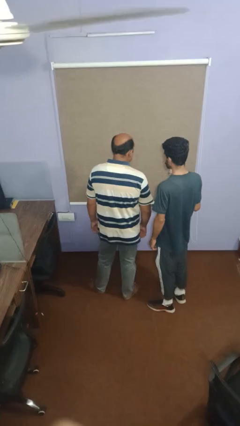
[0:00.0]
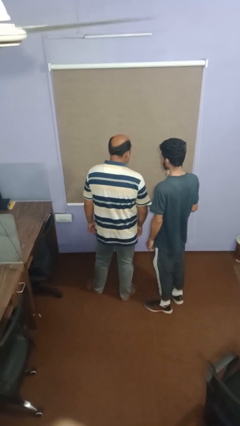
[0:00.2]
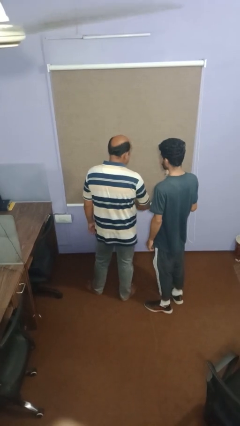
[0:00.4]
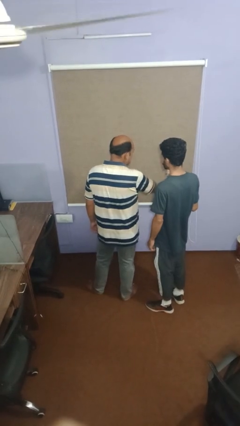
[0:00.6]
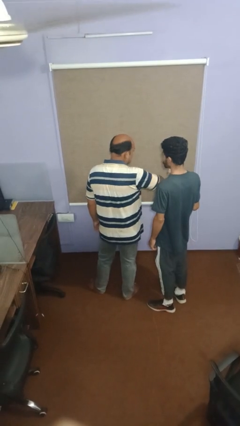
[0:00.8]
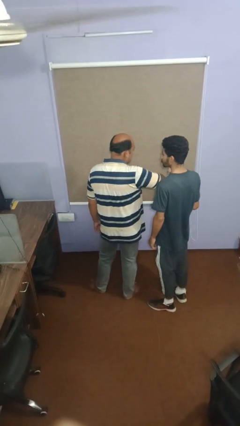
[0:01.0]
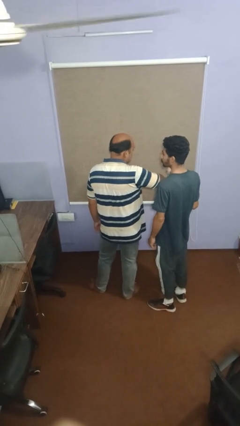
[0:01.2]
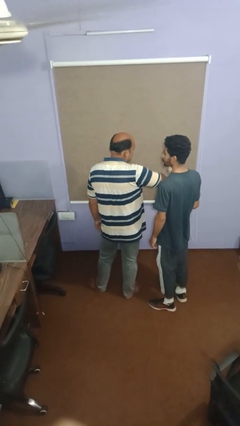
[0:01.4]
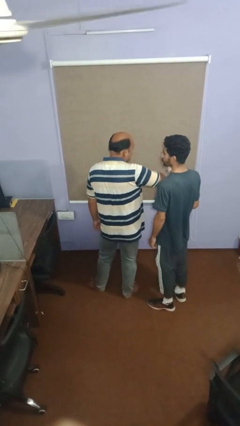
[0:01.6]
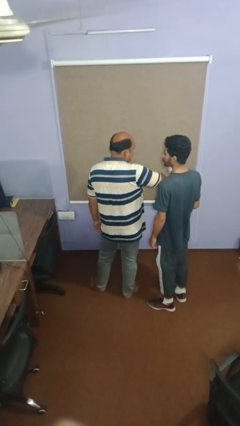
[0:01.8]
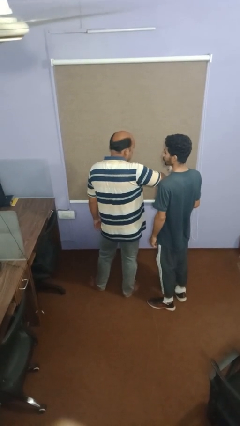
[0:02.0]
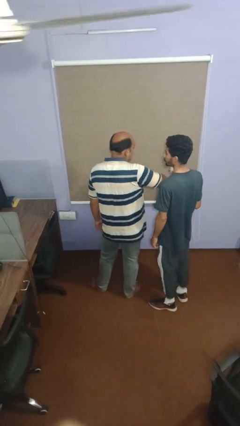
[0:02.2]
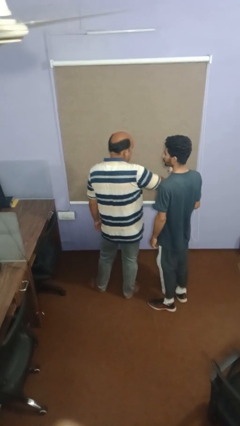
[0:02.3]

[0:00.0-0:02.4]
person nudges person with elbow

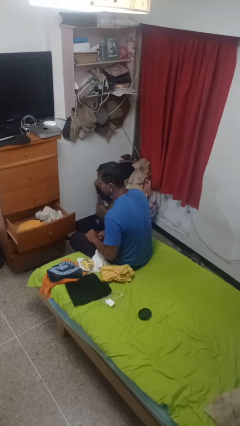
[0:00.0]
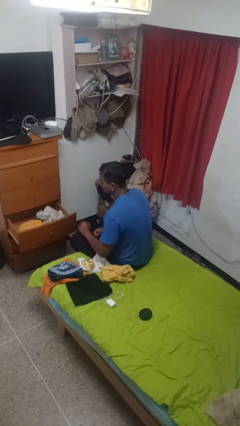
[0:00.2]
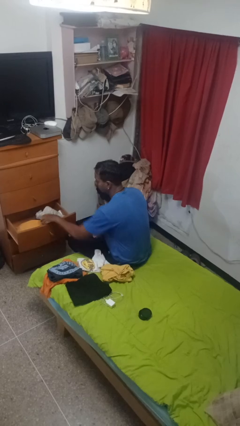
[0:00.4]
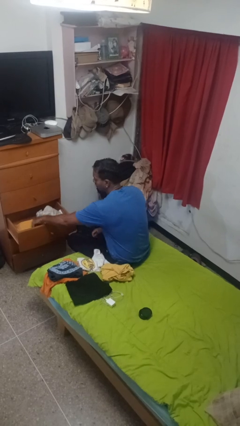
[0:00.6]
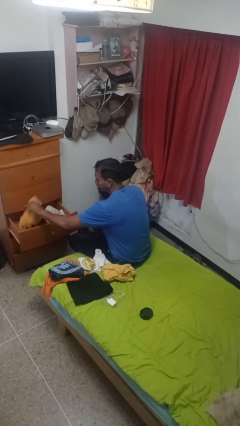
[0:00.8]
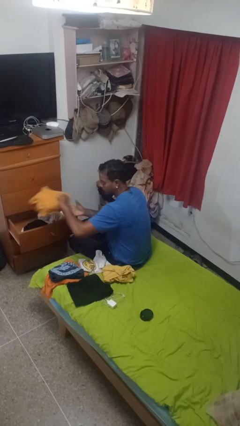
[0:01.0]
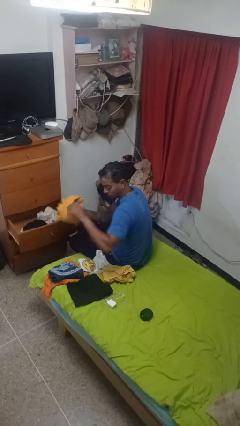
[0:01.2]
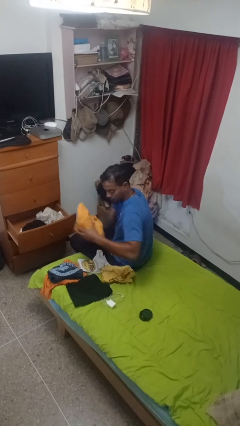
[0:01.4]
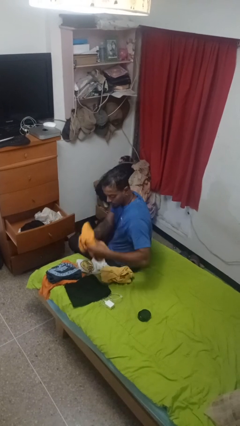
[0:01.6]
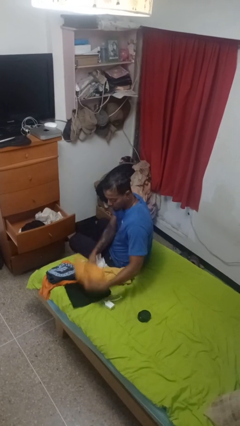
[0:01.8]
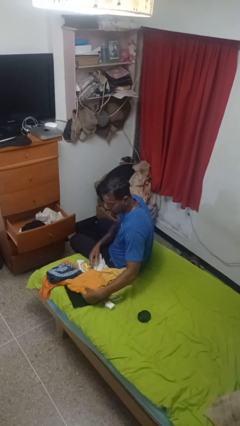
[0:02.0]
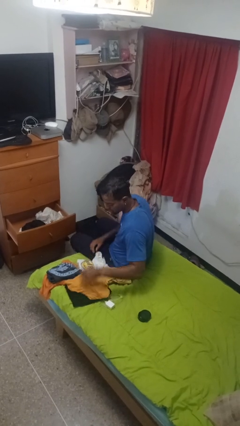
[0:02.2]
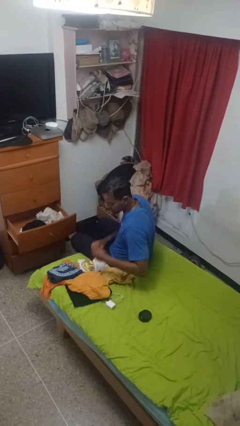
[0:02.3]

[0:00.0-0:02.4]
person takes clothes from dresser

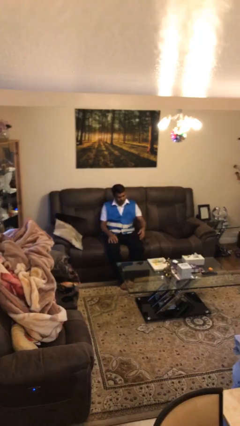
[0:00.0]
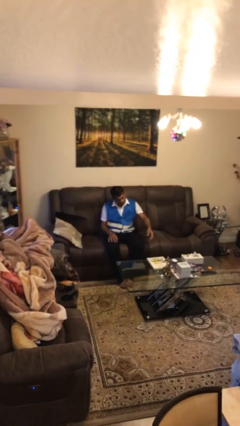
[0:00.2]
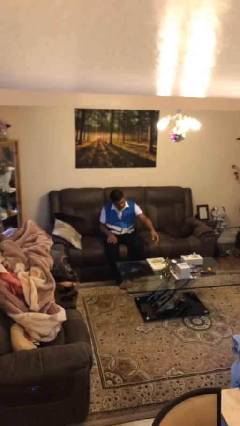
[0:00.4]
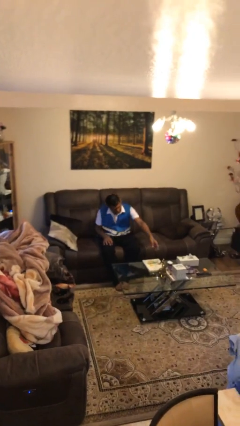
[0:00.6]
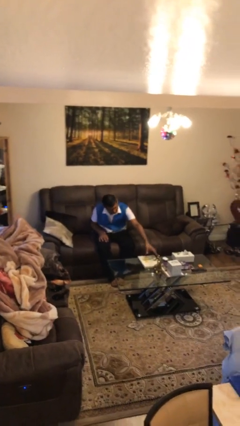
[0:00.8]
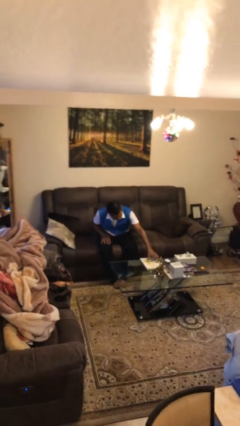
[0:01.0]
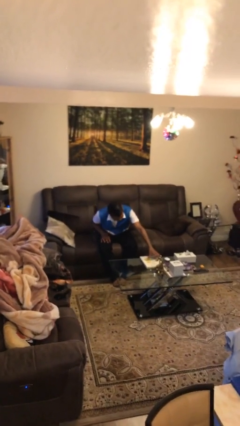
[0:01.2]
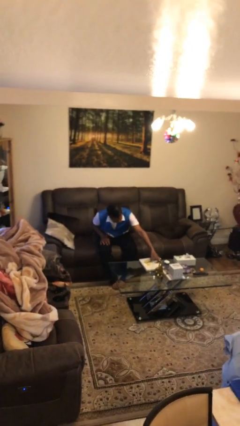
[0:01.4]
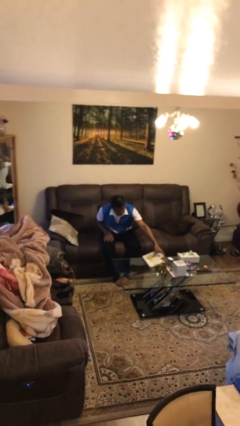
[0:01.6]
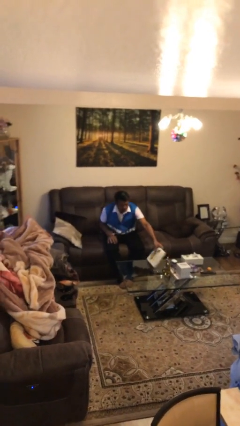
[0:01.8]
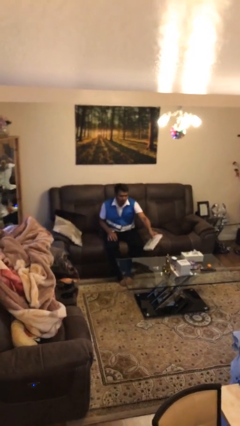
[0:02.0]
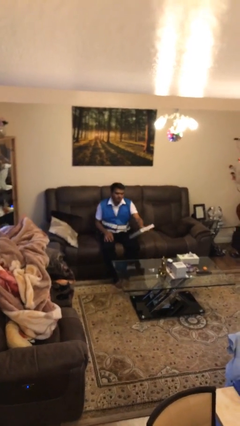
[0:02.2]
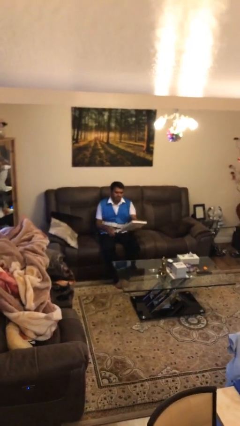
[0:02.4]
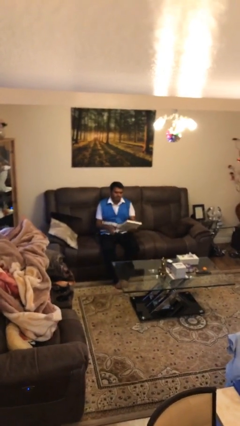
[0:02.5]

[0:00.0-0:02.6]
person picks up object from table

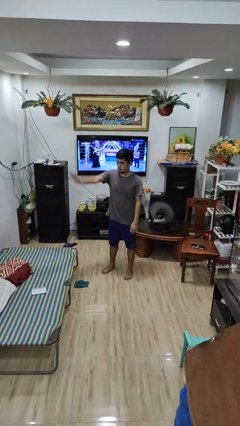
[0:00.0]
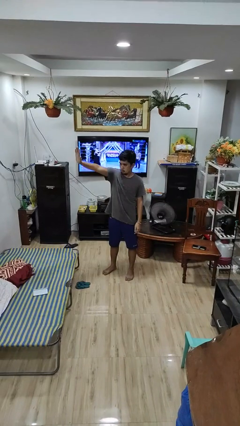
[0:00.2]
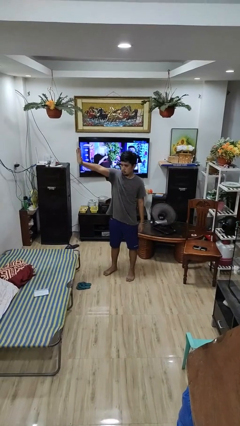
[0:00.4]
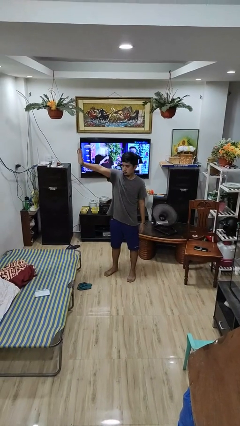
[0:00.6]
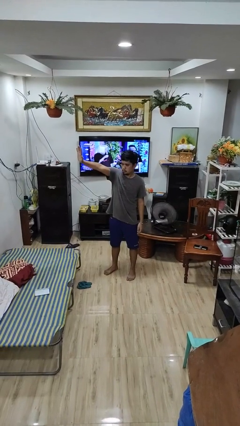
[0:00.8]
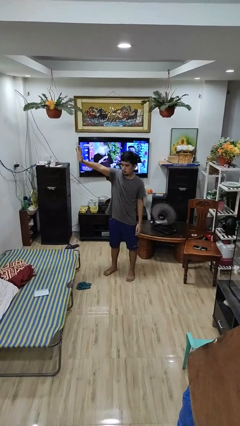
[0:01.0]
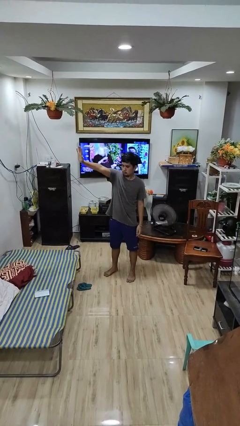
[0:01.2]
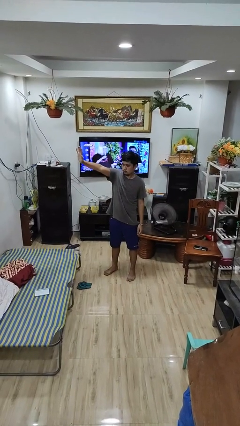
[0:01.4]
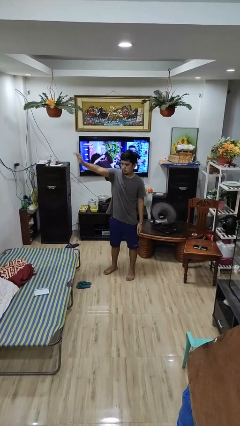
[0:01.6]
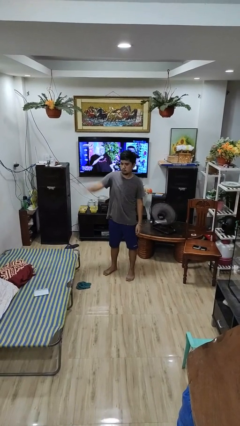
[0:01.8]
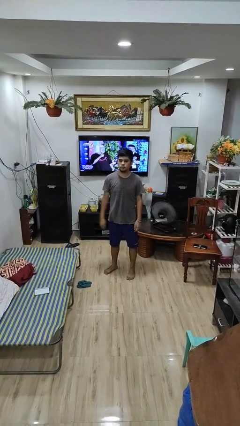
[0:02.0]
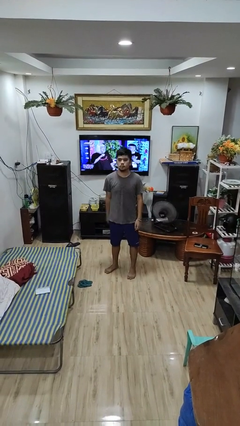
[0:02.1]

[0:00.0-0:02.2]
person gestures stop

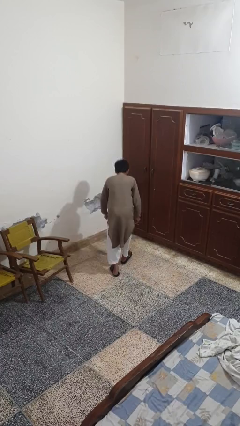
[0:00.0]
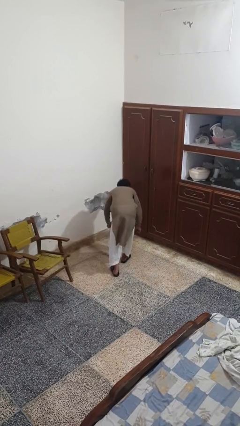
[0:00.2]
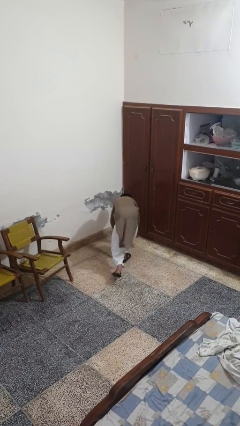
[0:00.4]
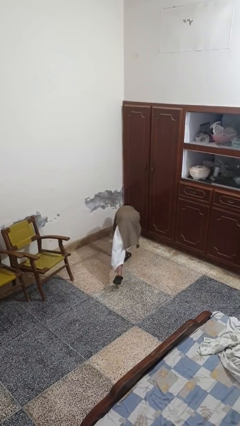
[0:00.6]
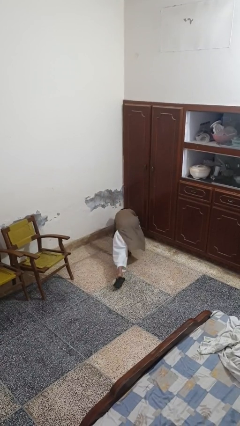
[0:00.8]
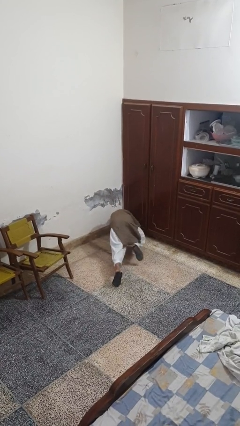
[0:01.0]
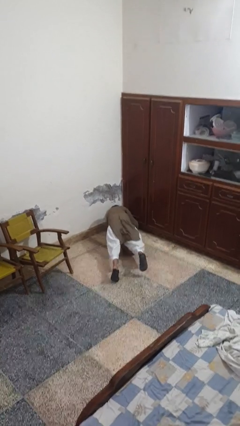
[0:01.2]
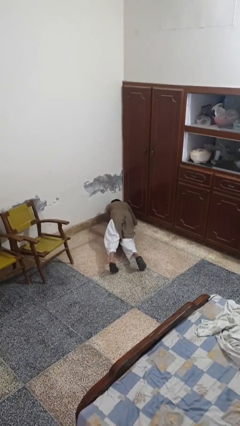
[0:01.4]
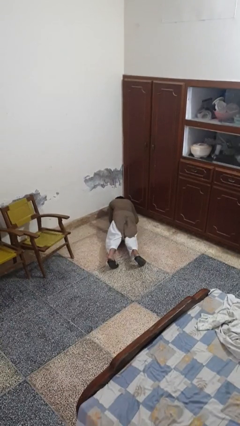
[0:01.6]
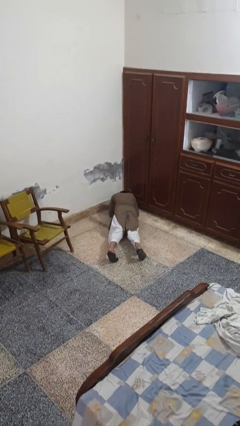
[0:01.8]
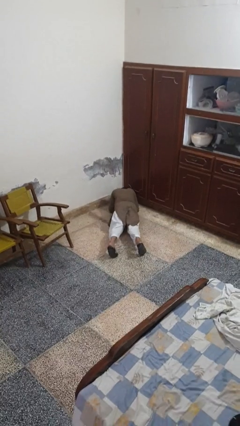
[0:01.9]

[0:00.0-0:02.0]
person exercises with plank

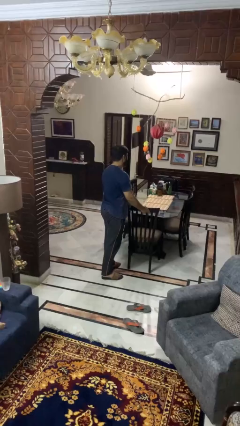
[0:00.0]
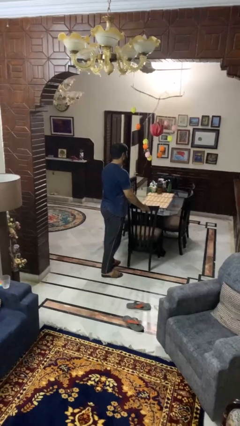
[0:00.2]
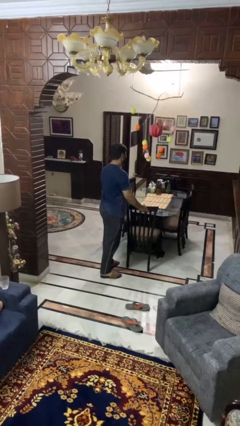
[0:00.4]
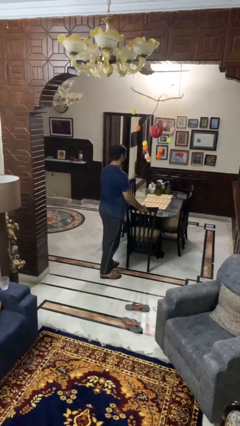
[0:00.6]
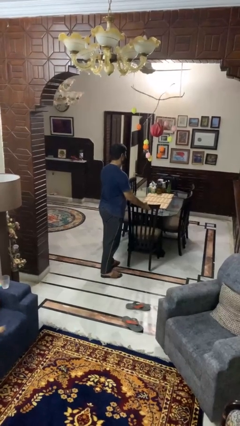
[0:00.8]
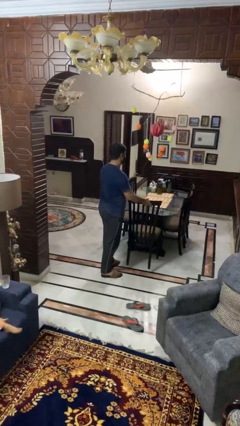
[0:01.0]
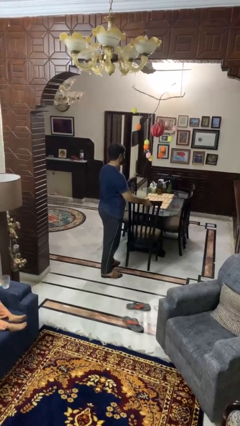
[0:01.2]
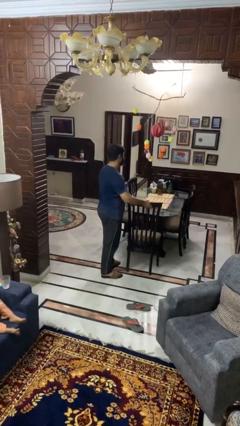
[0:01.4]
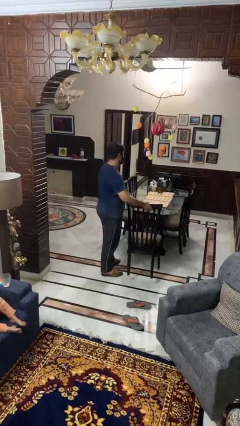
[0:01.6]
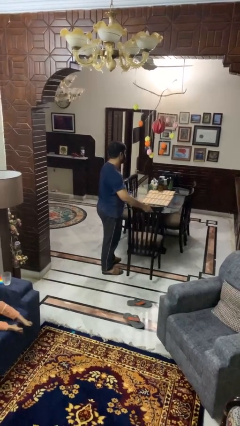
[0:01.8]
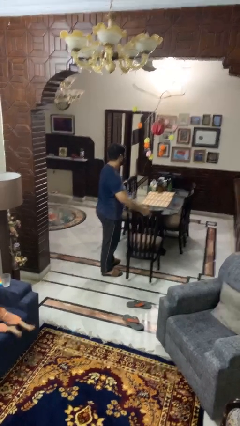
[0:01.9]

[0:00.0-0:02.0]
person pulls out chair

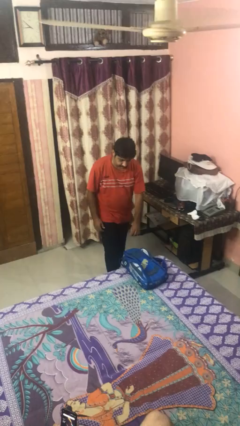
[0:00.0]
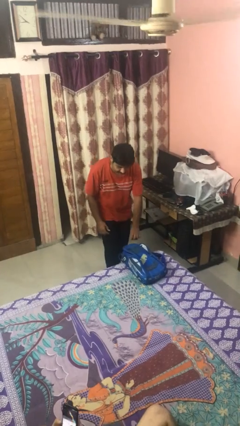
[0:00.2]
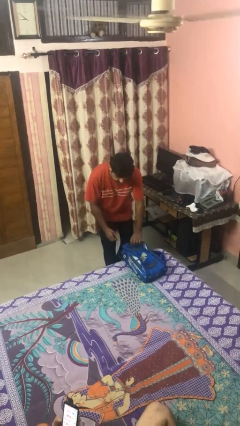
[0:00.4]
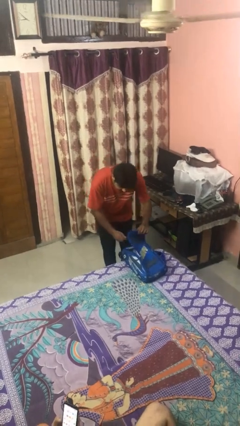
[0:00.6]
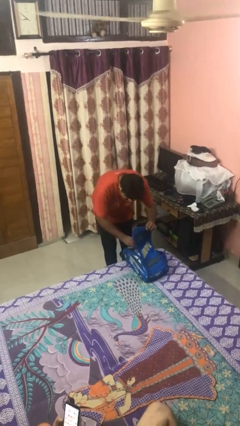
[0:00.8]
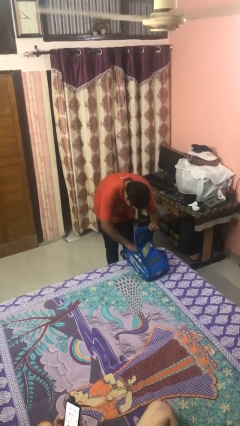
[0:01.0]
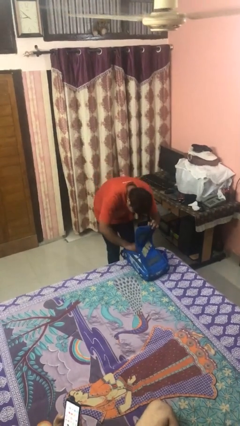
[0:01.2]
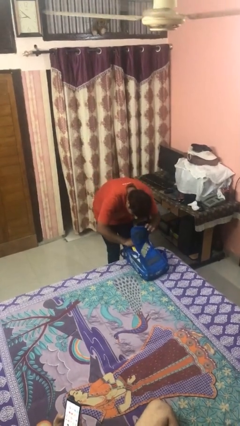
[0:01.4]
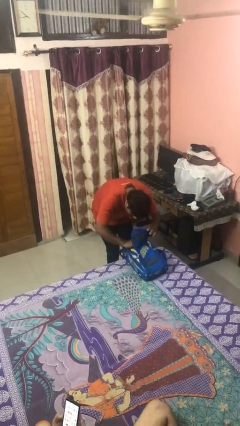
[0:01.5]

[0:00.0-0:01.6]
person searches in backpack

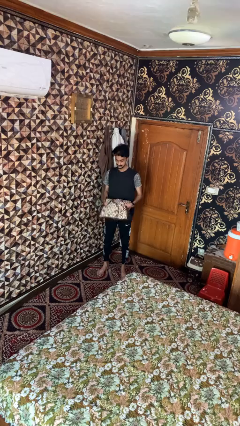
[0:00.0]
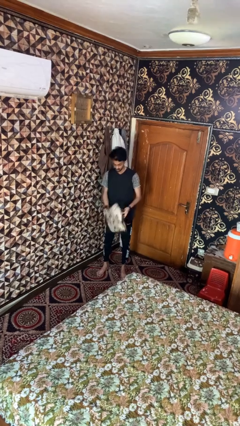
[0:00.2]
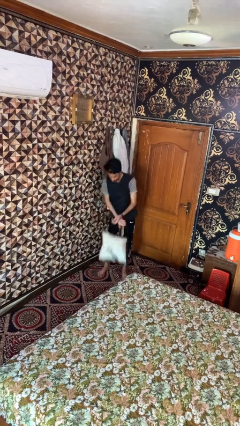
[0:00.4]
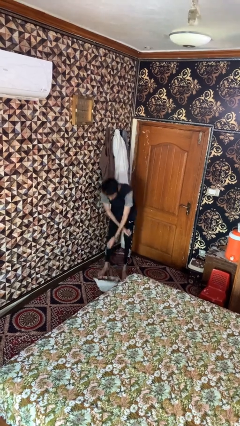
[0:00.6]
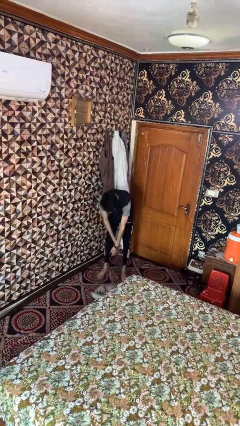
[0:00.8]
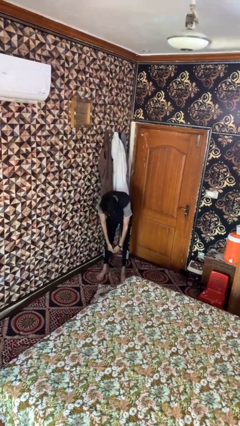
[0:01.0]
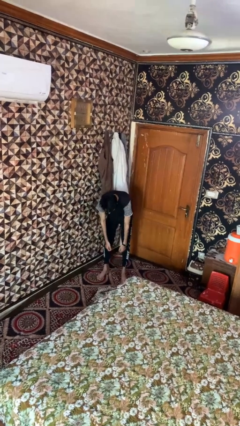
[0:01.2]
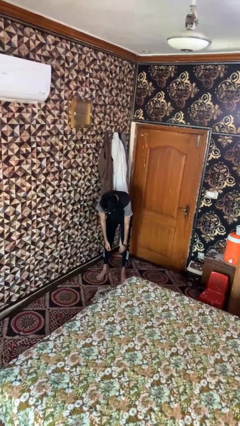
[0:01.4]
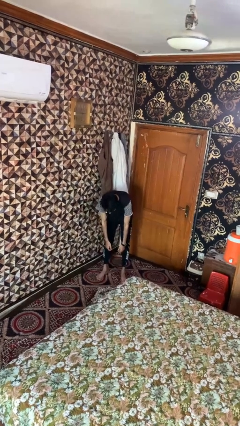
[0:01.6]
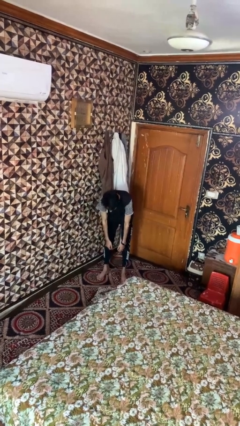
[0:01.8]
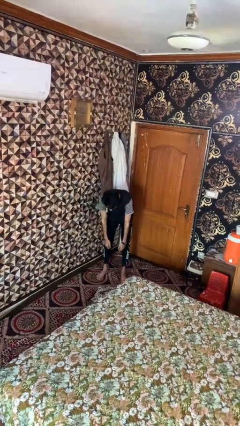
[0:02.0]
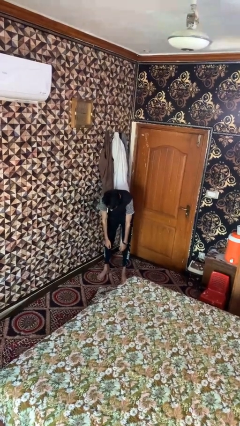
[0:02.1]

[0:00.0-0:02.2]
person drops object
